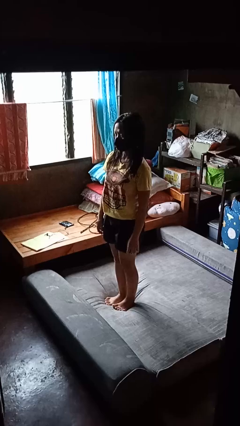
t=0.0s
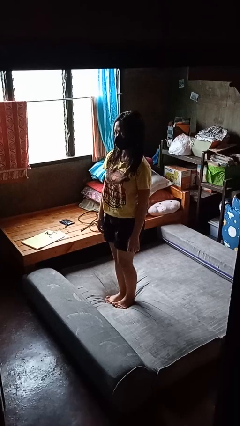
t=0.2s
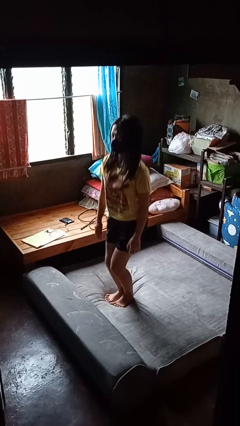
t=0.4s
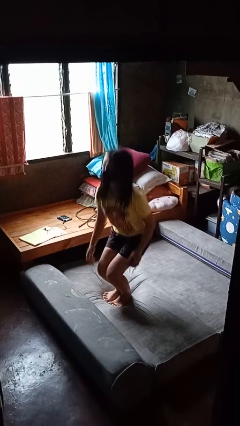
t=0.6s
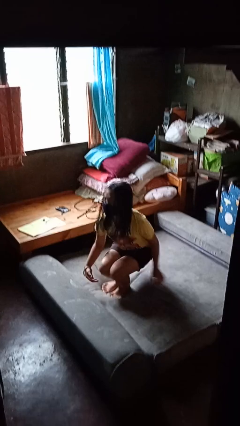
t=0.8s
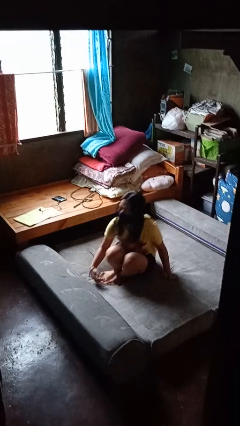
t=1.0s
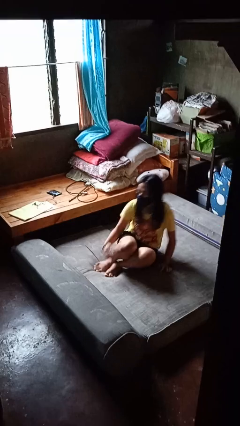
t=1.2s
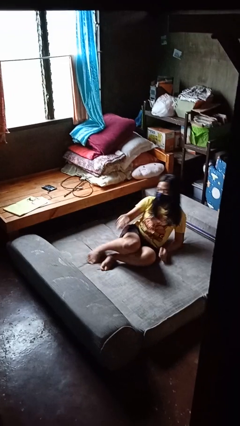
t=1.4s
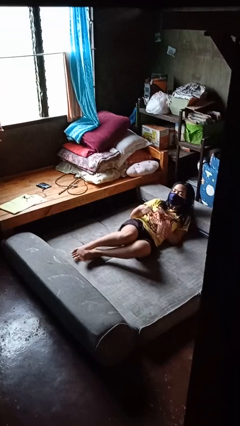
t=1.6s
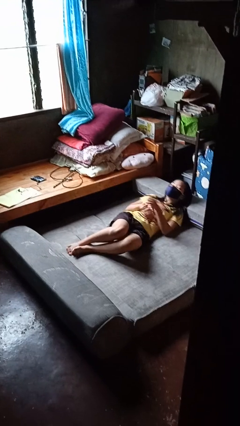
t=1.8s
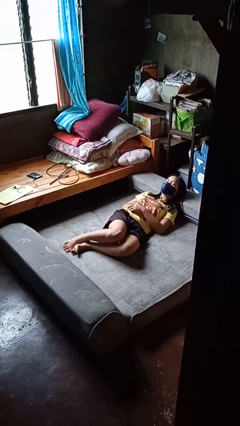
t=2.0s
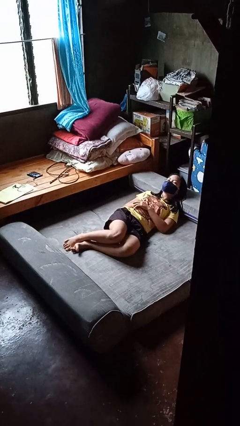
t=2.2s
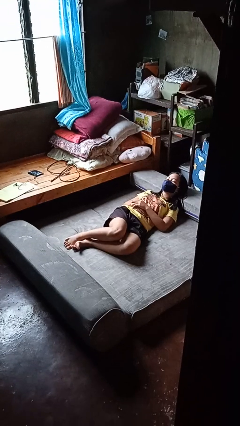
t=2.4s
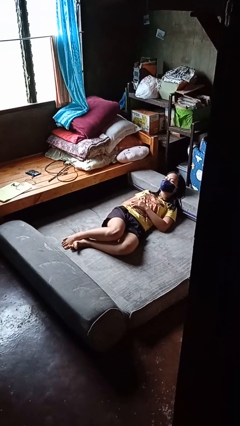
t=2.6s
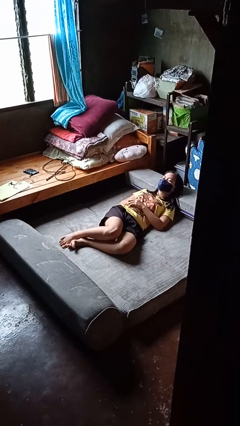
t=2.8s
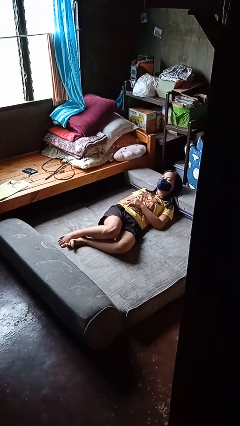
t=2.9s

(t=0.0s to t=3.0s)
person lies down on bed

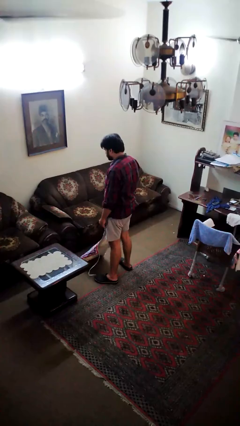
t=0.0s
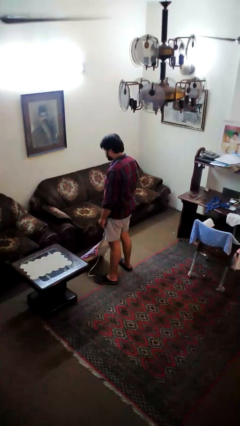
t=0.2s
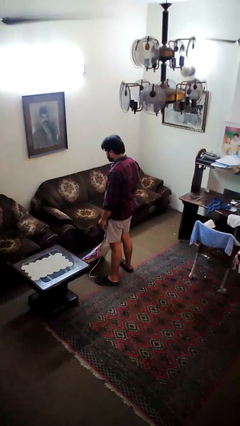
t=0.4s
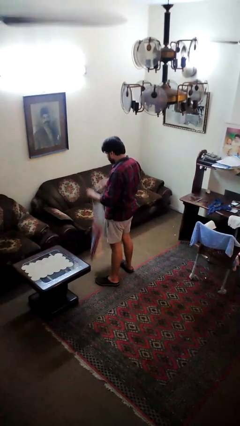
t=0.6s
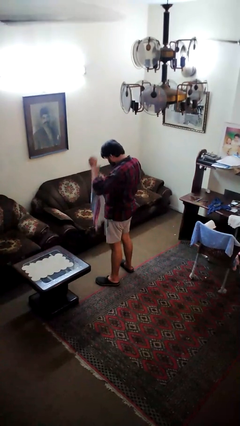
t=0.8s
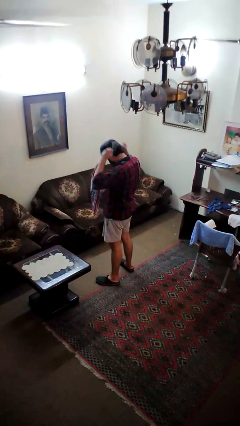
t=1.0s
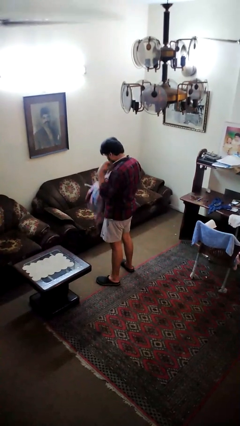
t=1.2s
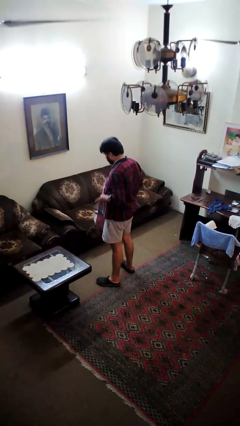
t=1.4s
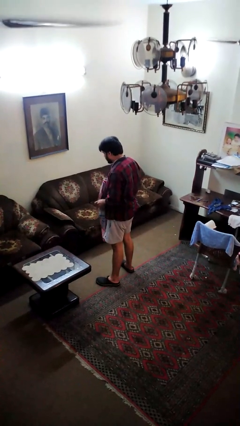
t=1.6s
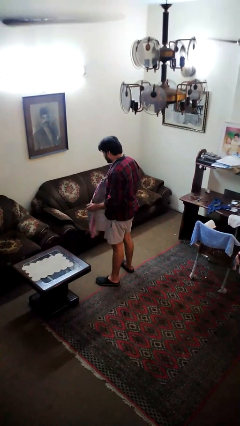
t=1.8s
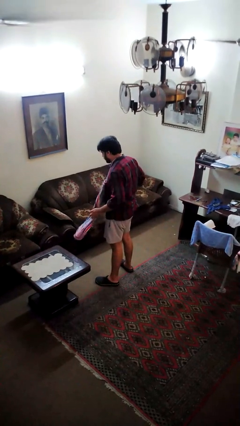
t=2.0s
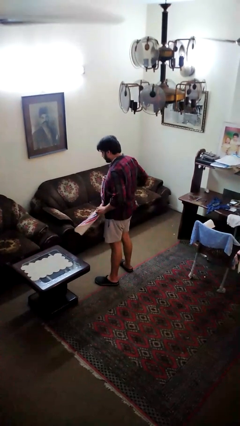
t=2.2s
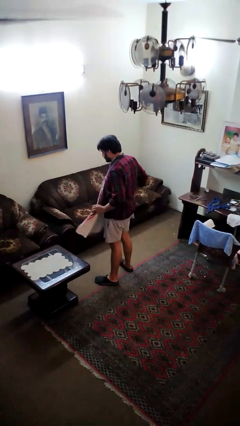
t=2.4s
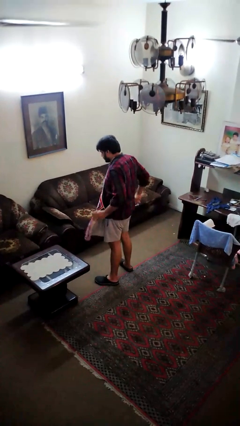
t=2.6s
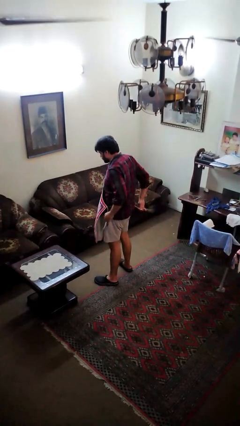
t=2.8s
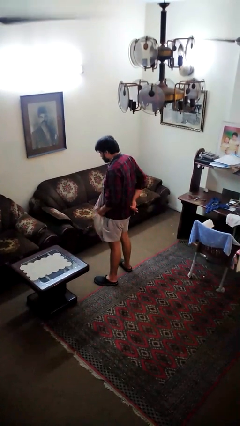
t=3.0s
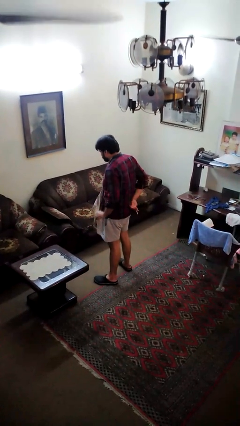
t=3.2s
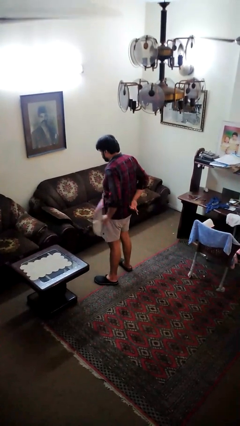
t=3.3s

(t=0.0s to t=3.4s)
person puts on apron

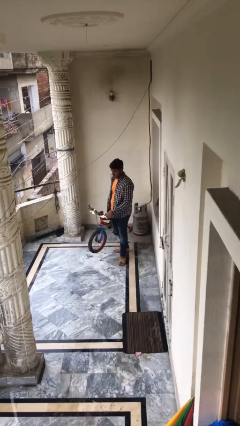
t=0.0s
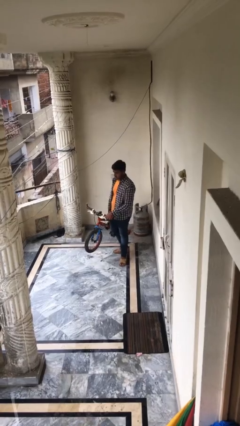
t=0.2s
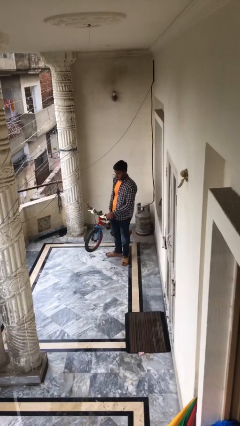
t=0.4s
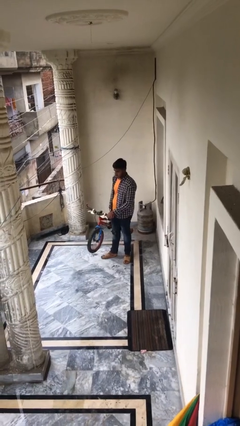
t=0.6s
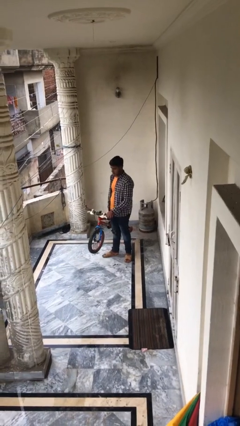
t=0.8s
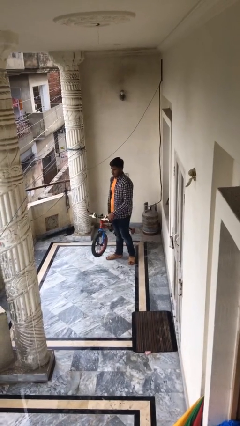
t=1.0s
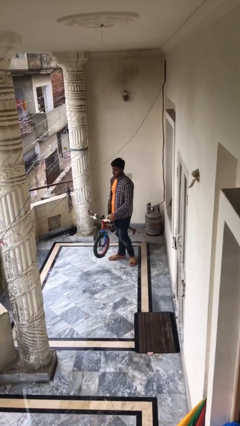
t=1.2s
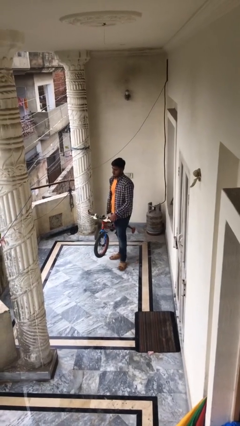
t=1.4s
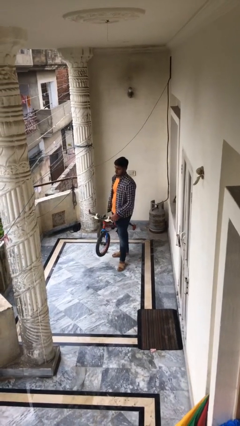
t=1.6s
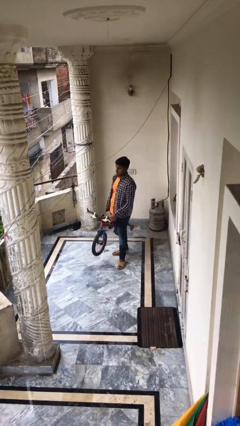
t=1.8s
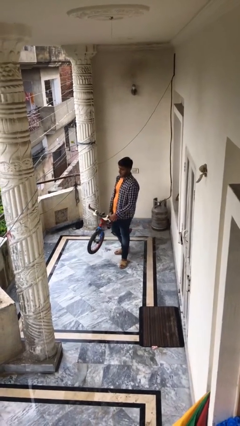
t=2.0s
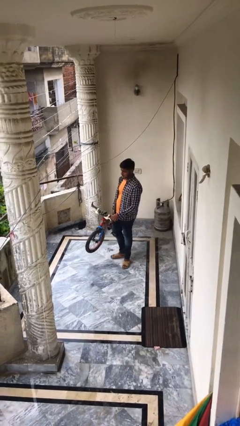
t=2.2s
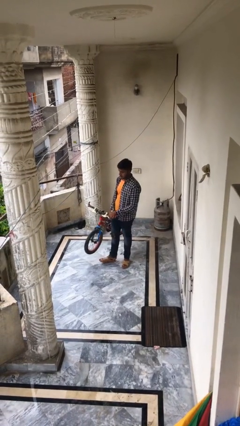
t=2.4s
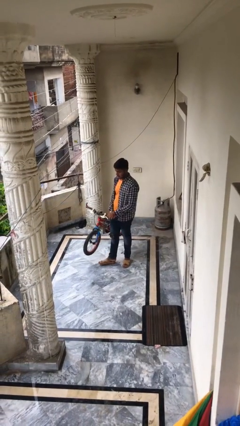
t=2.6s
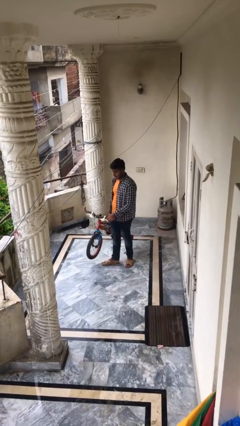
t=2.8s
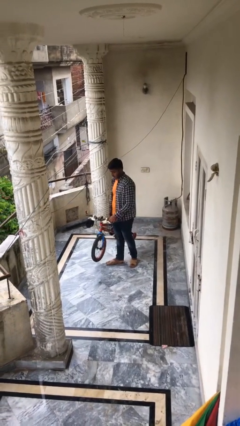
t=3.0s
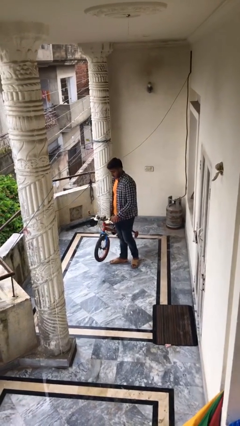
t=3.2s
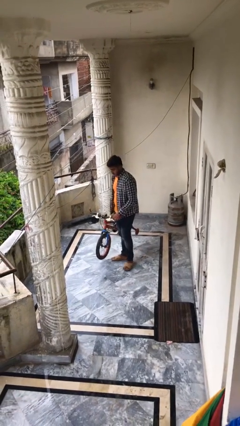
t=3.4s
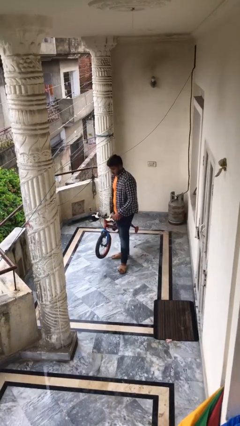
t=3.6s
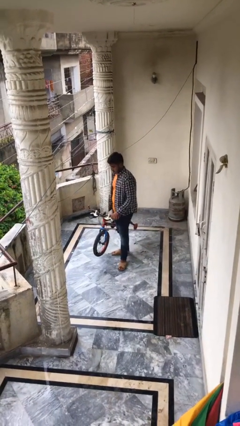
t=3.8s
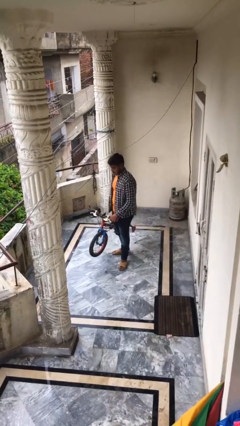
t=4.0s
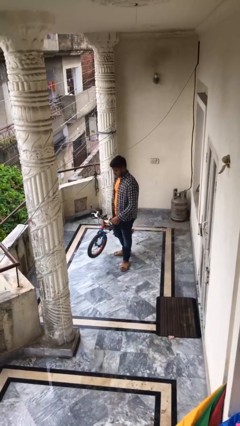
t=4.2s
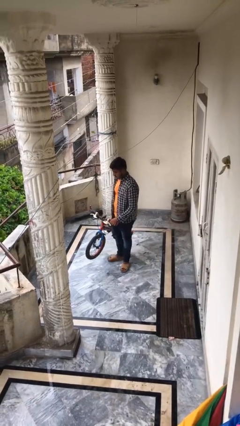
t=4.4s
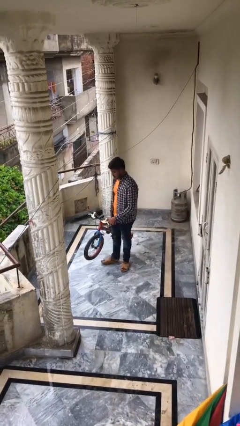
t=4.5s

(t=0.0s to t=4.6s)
person carries heavy object

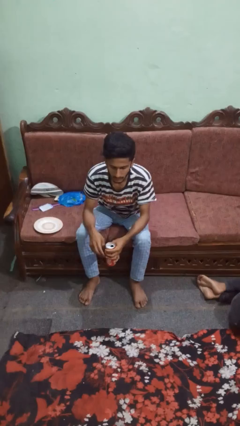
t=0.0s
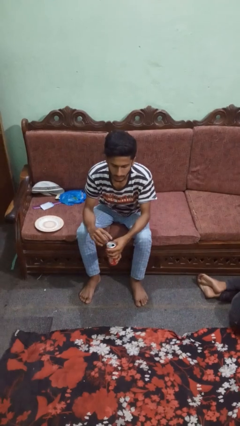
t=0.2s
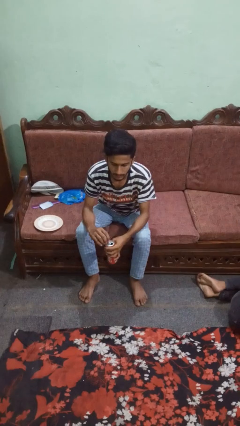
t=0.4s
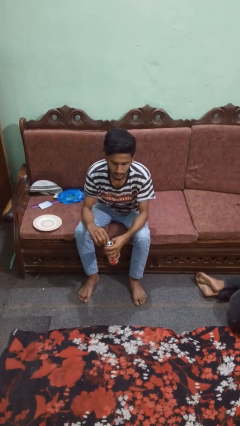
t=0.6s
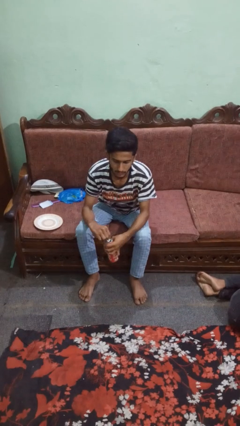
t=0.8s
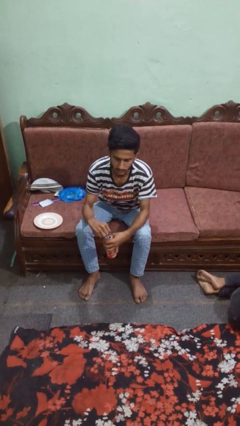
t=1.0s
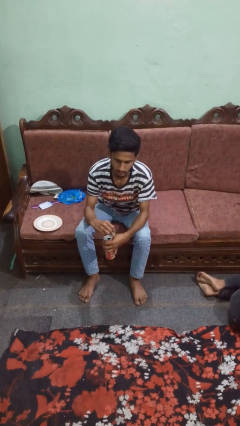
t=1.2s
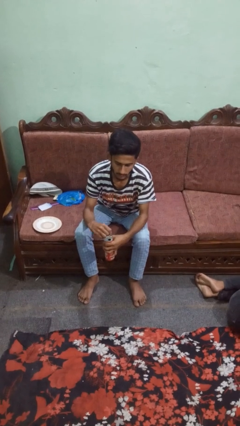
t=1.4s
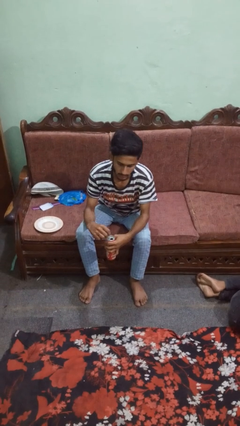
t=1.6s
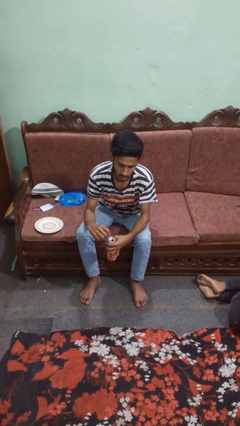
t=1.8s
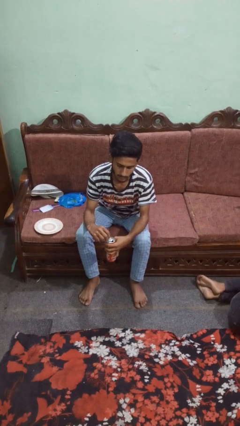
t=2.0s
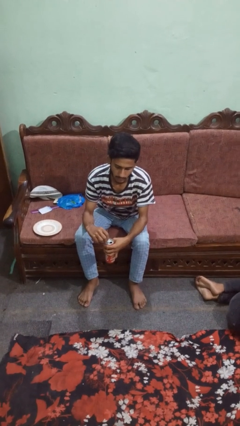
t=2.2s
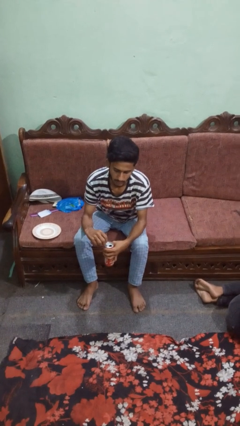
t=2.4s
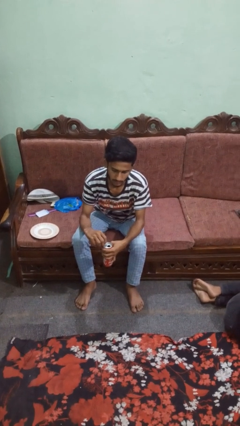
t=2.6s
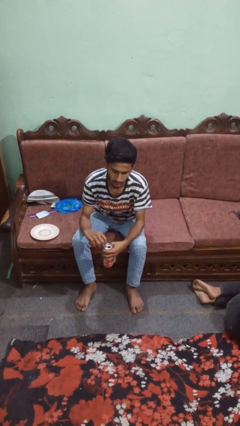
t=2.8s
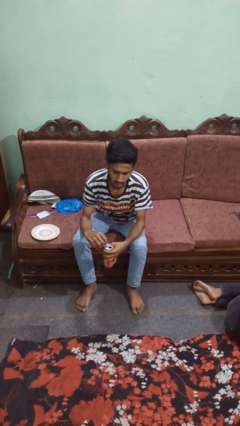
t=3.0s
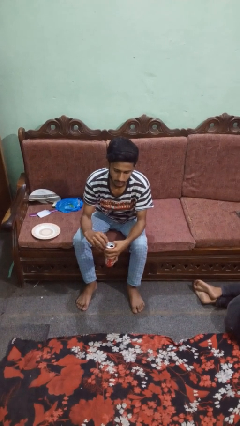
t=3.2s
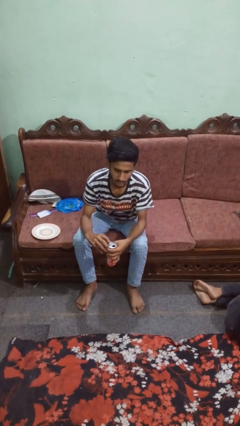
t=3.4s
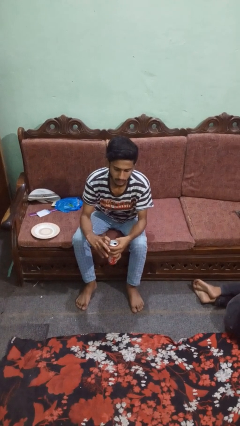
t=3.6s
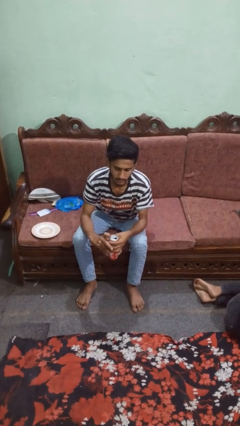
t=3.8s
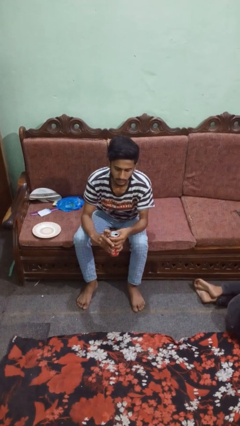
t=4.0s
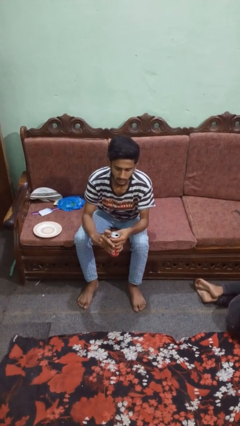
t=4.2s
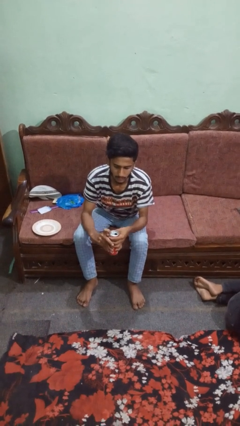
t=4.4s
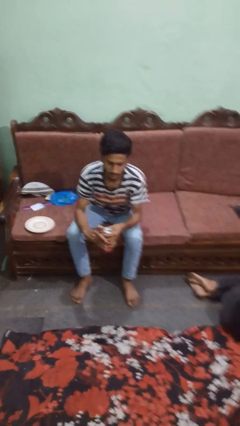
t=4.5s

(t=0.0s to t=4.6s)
person opens beverage can

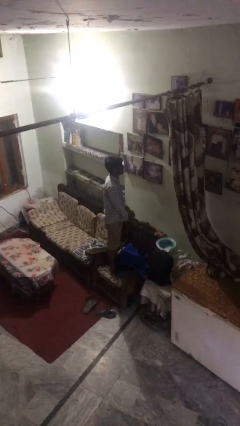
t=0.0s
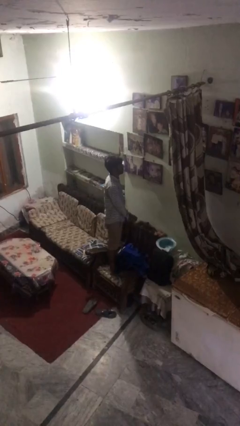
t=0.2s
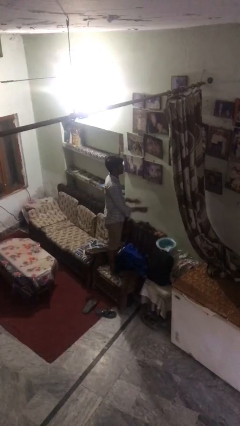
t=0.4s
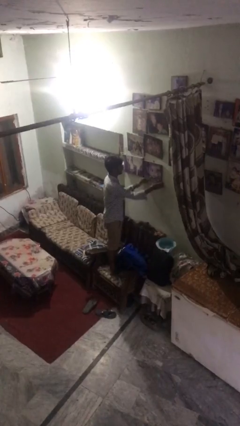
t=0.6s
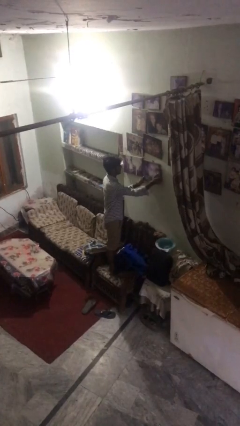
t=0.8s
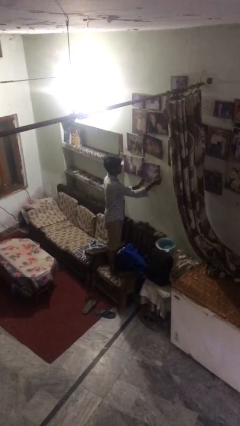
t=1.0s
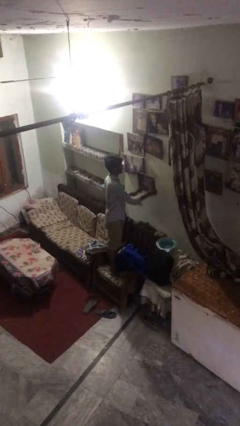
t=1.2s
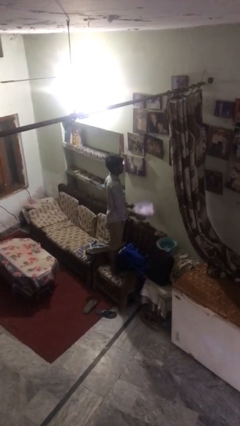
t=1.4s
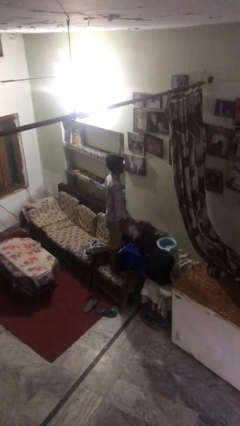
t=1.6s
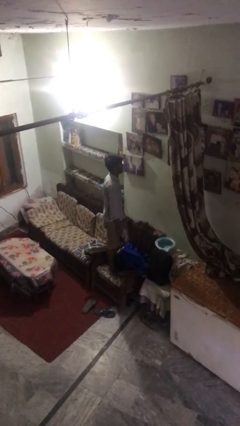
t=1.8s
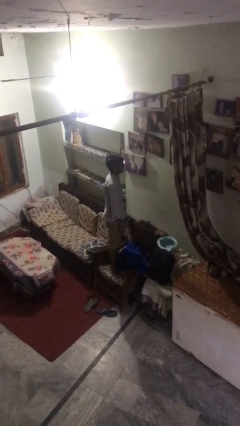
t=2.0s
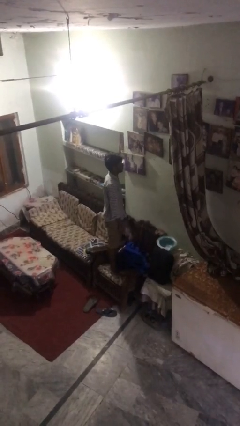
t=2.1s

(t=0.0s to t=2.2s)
person takes down picture frame
